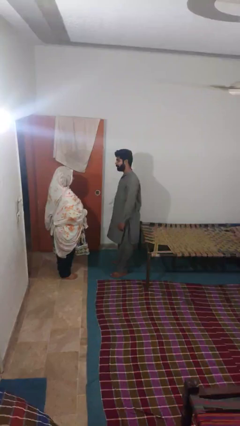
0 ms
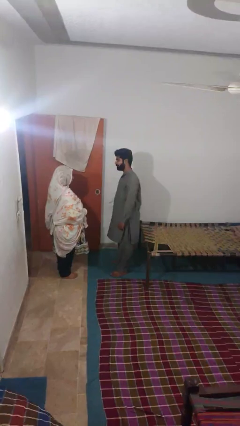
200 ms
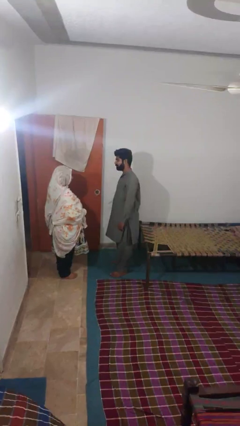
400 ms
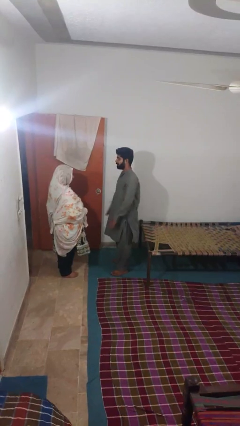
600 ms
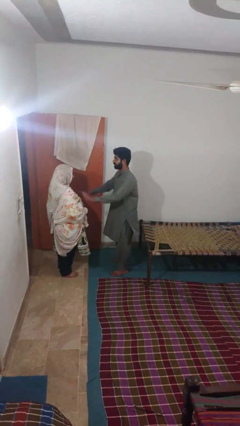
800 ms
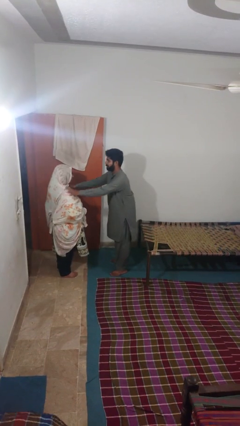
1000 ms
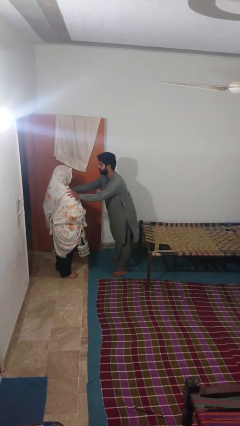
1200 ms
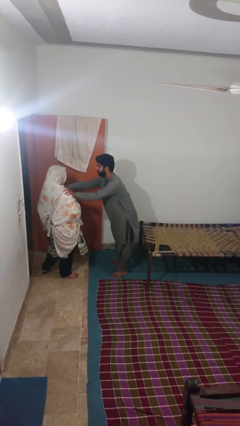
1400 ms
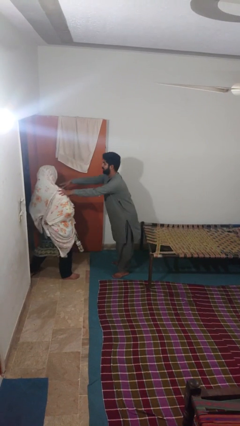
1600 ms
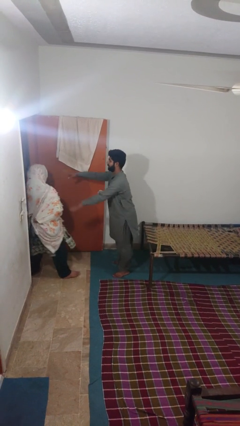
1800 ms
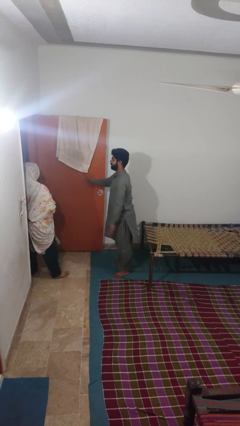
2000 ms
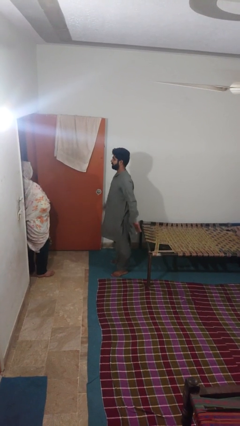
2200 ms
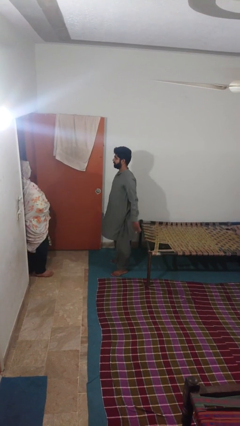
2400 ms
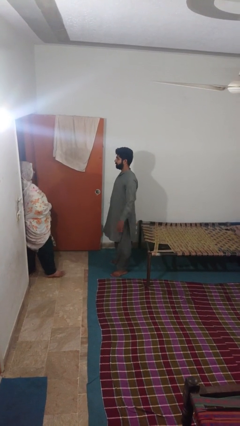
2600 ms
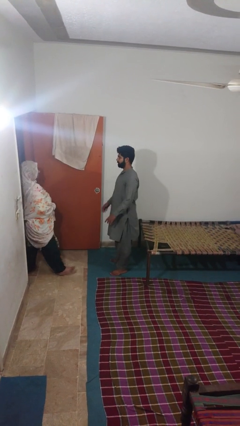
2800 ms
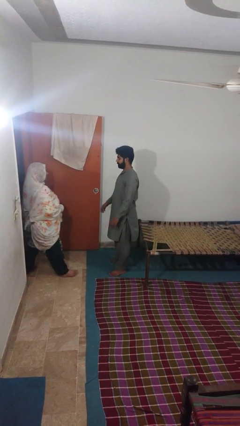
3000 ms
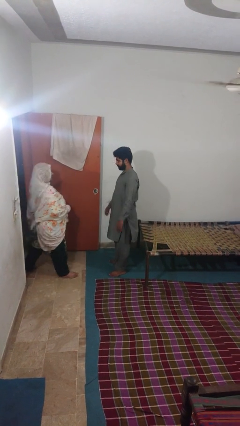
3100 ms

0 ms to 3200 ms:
person shoves person

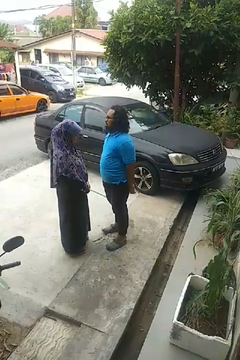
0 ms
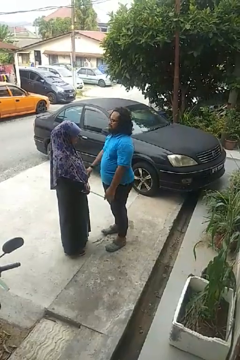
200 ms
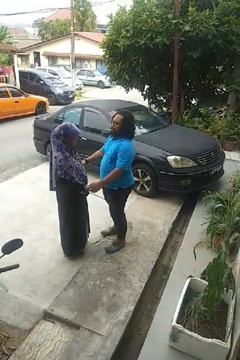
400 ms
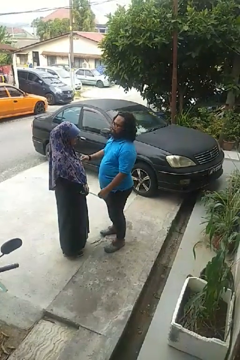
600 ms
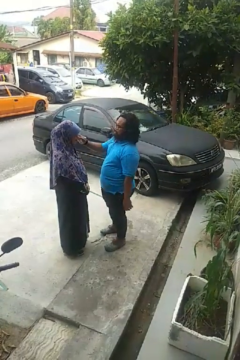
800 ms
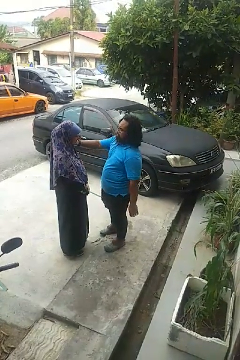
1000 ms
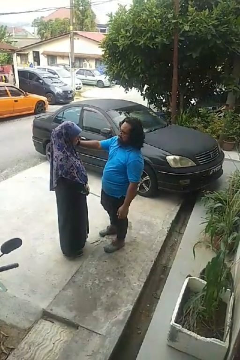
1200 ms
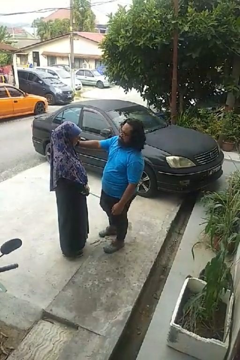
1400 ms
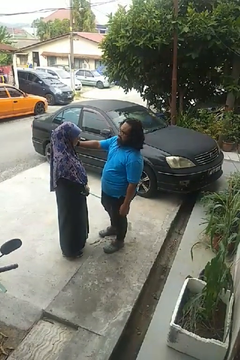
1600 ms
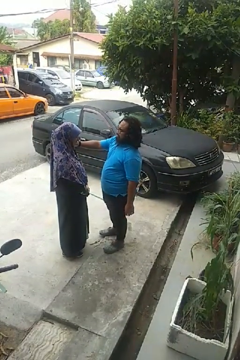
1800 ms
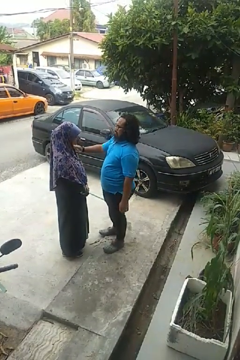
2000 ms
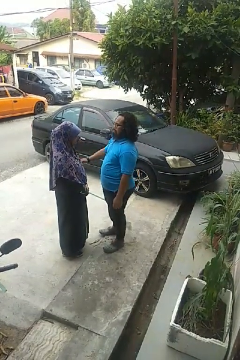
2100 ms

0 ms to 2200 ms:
person pounds shoulders of person

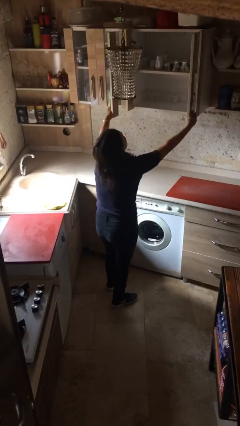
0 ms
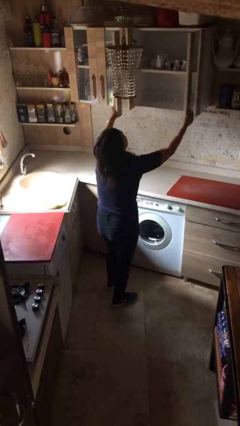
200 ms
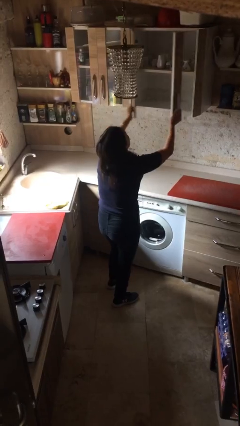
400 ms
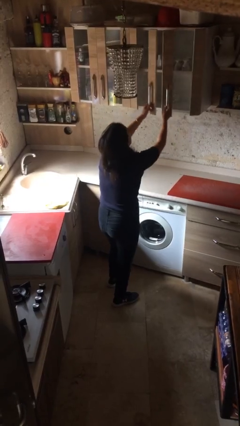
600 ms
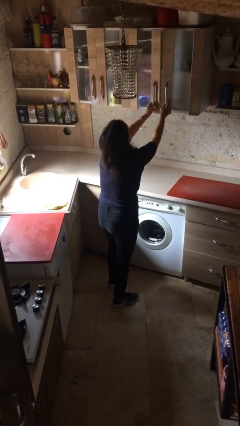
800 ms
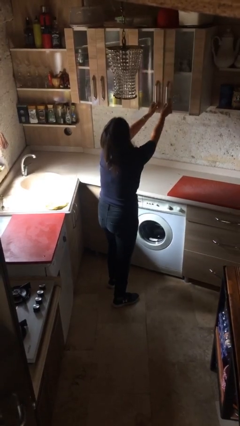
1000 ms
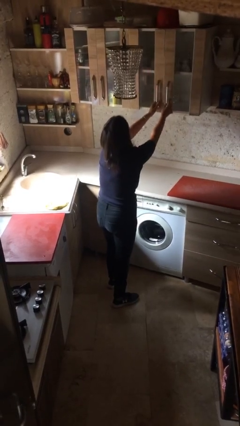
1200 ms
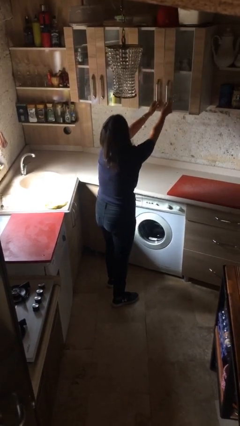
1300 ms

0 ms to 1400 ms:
person closes cabinet

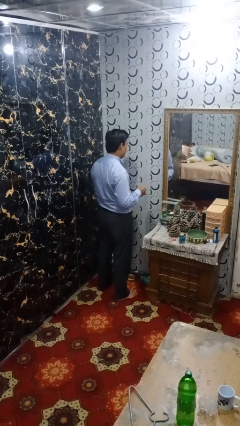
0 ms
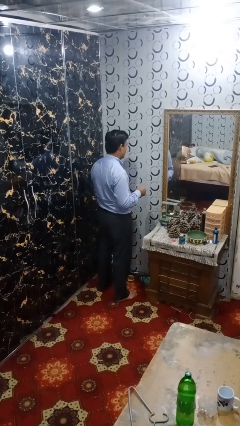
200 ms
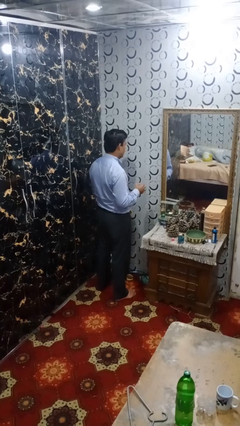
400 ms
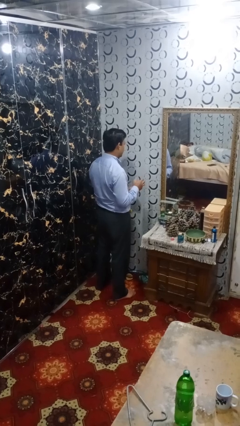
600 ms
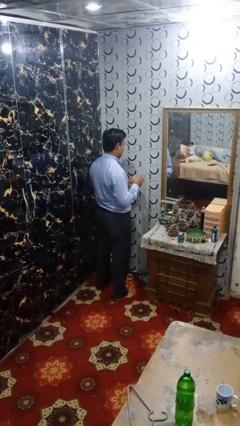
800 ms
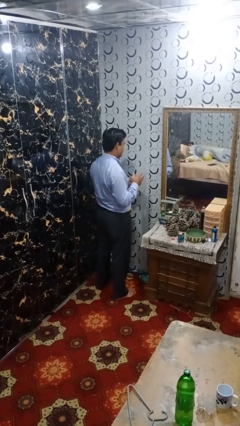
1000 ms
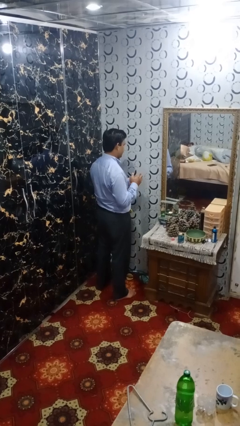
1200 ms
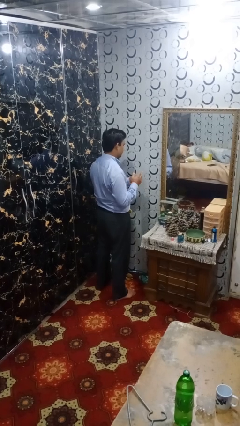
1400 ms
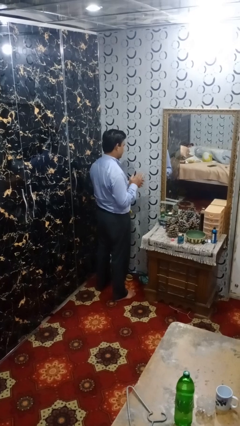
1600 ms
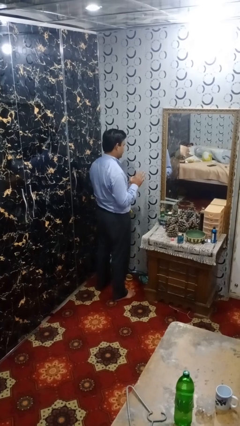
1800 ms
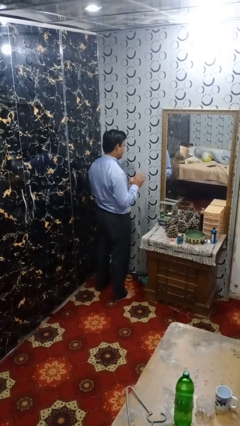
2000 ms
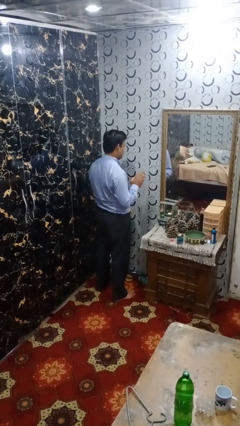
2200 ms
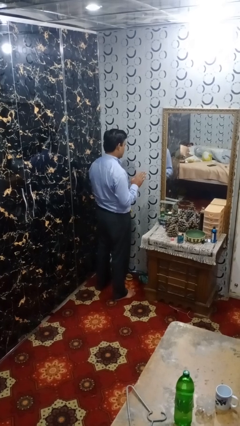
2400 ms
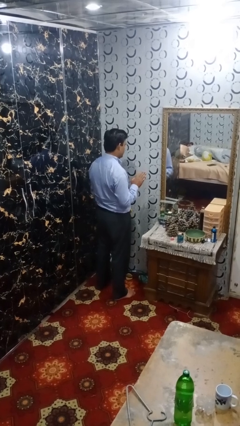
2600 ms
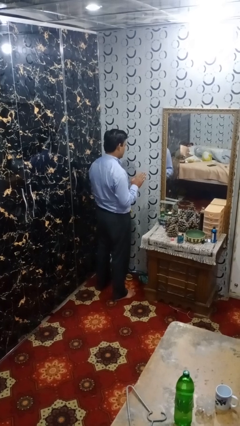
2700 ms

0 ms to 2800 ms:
person puts on ring

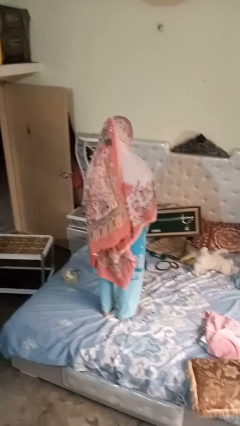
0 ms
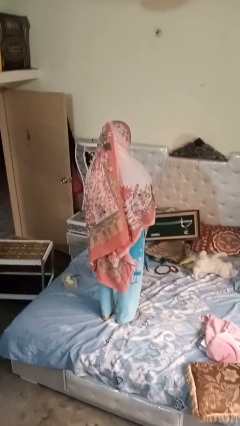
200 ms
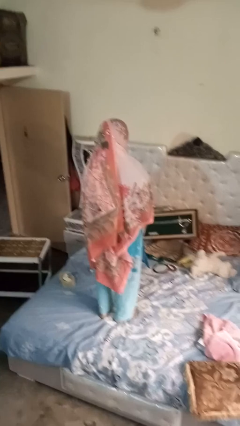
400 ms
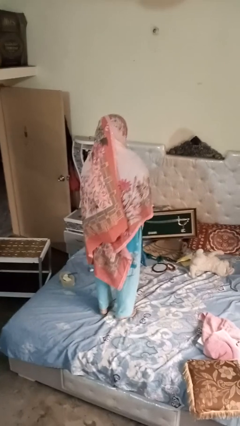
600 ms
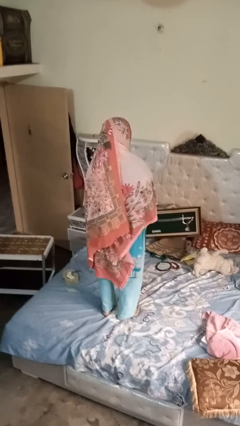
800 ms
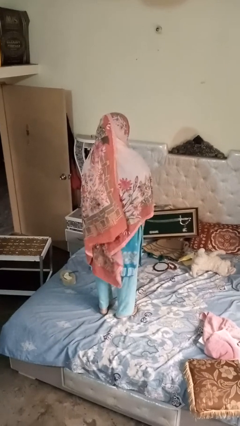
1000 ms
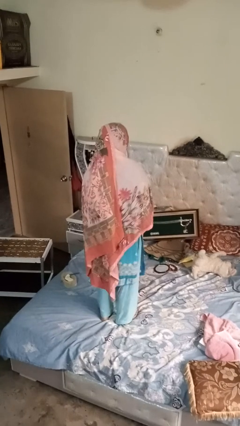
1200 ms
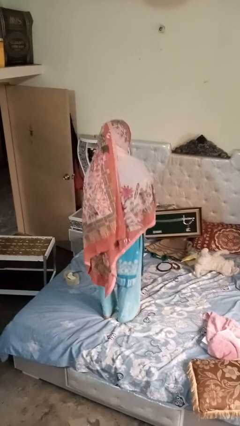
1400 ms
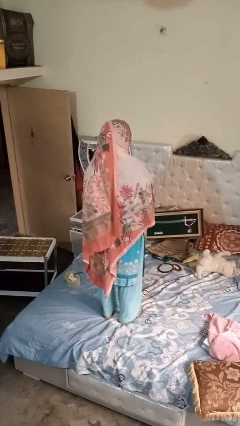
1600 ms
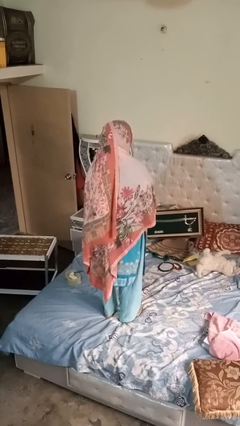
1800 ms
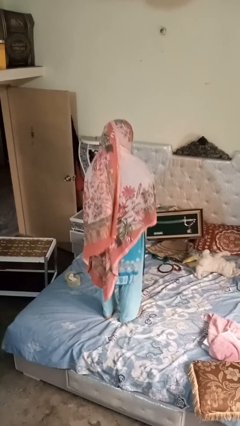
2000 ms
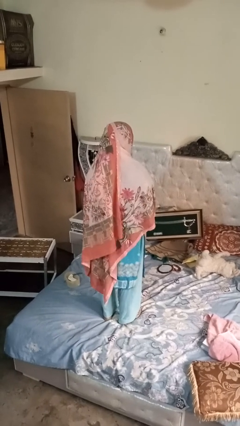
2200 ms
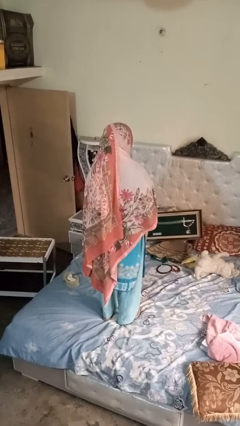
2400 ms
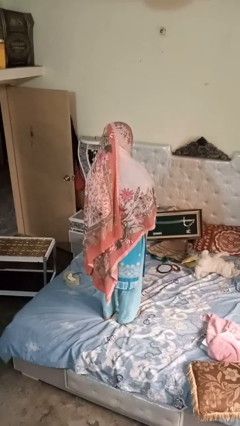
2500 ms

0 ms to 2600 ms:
person jumps on bed

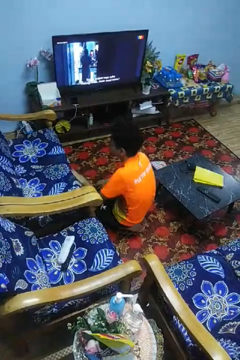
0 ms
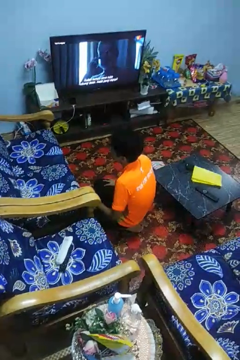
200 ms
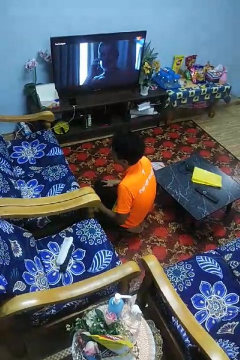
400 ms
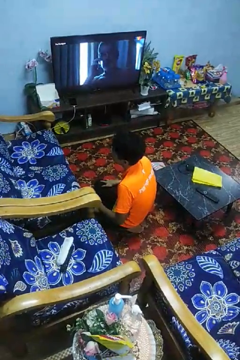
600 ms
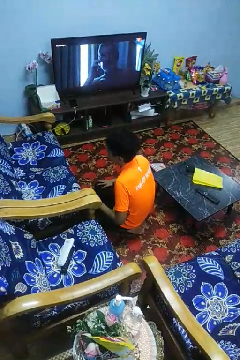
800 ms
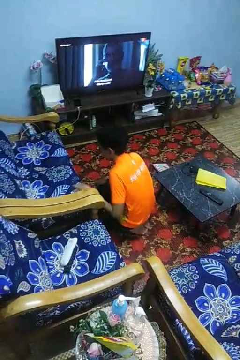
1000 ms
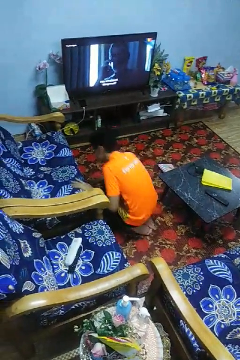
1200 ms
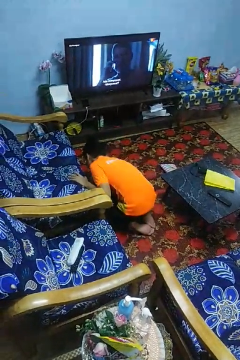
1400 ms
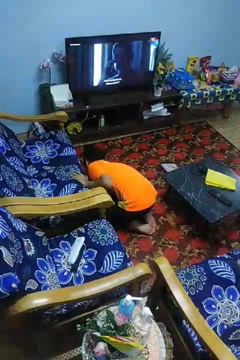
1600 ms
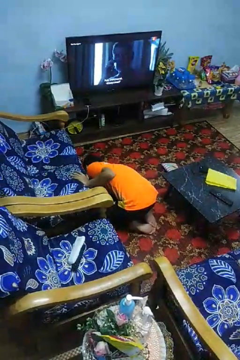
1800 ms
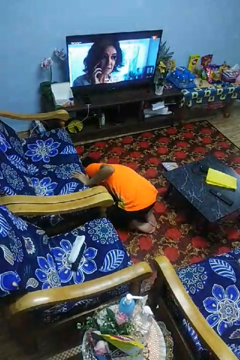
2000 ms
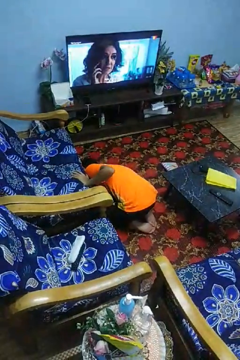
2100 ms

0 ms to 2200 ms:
person searches under couch

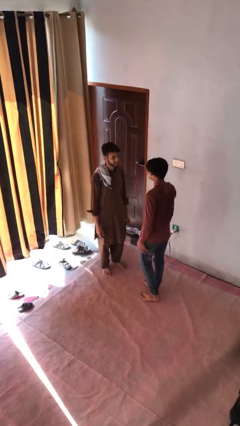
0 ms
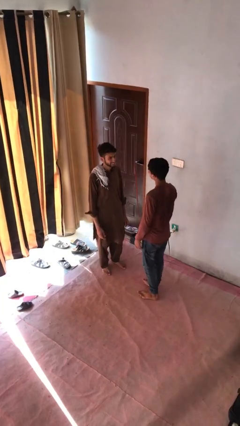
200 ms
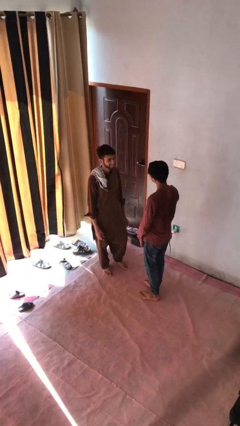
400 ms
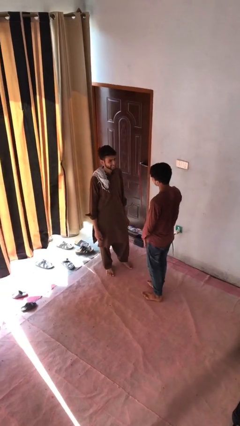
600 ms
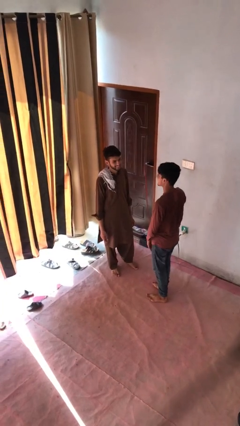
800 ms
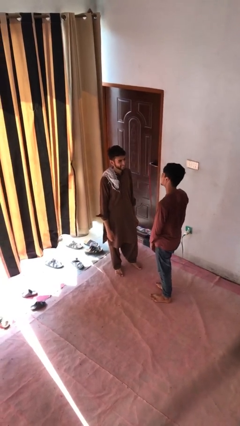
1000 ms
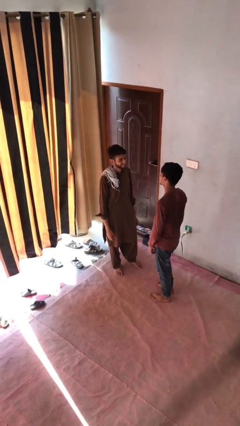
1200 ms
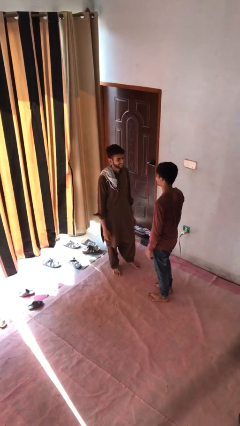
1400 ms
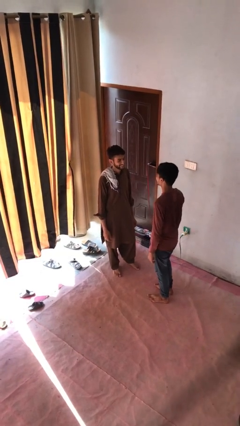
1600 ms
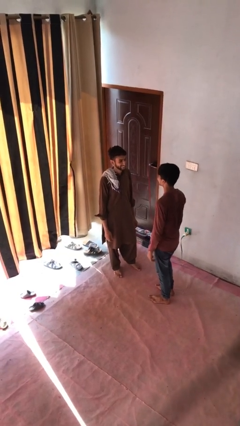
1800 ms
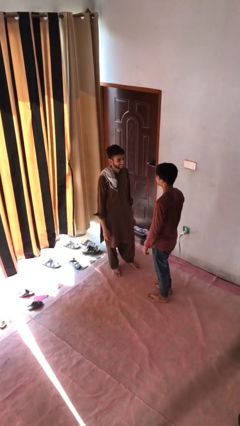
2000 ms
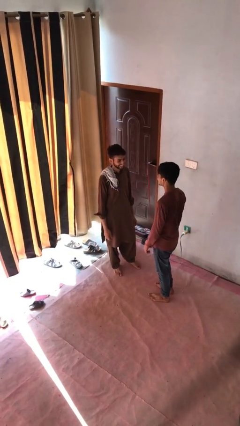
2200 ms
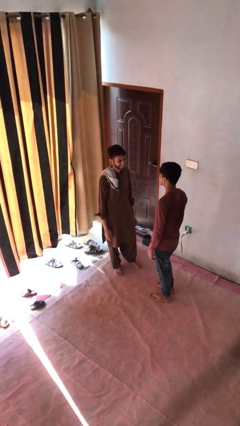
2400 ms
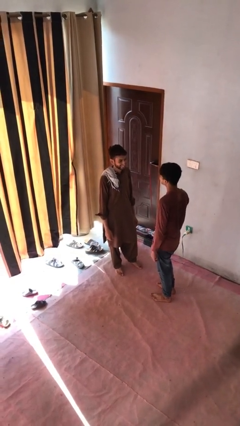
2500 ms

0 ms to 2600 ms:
person talks to person

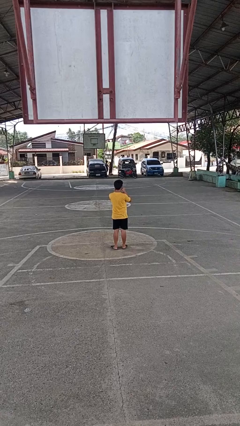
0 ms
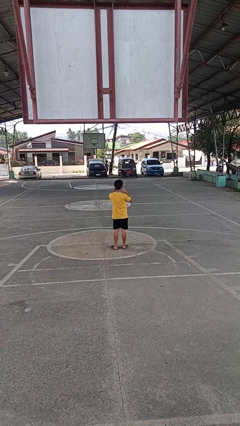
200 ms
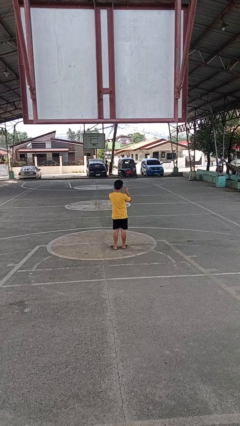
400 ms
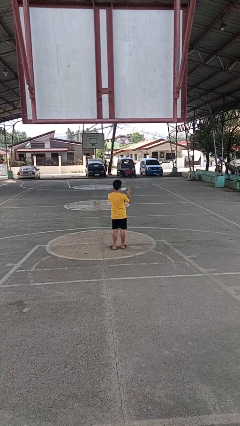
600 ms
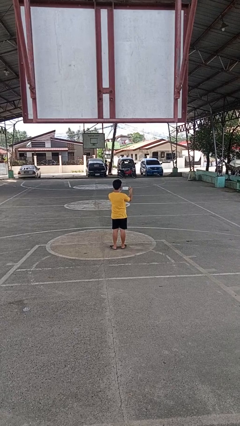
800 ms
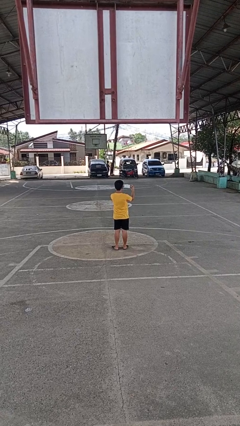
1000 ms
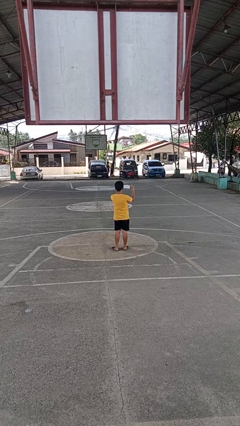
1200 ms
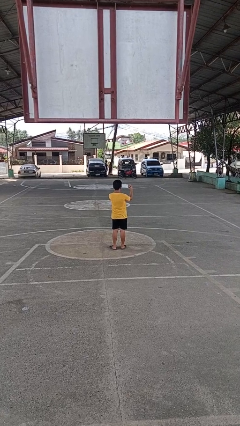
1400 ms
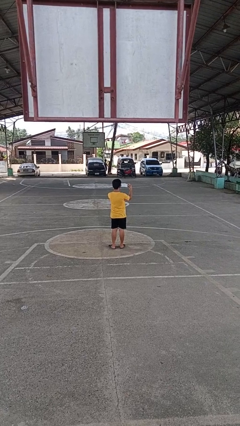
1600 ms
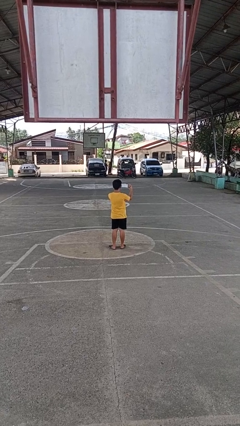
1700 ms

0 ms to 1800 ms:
person takes off facemask
